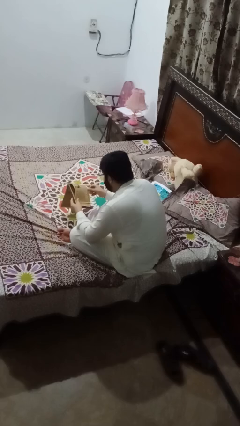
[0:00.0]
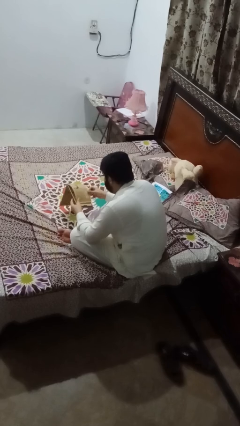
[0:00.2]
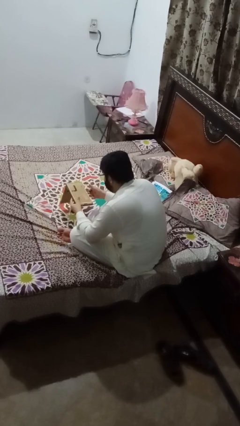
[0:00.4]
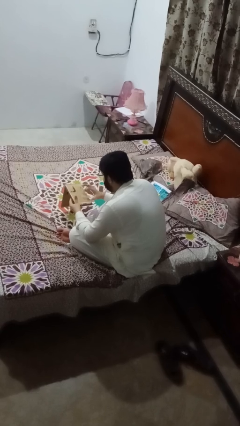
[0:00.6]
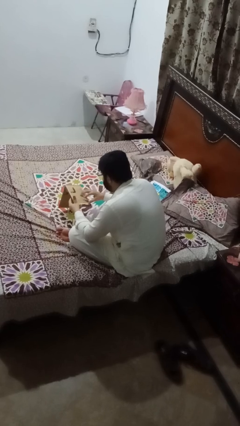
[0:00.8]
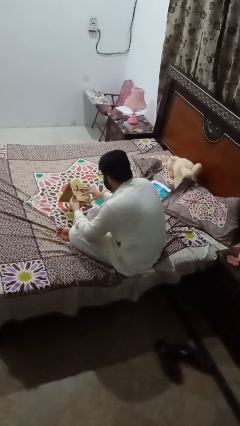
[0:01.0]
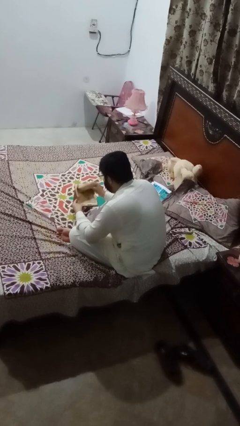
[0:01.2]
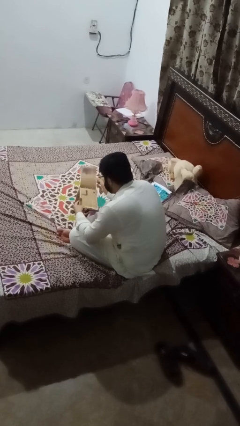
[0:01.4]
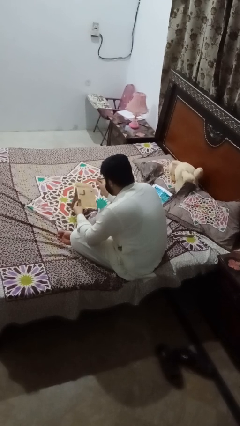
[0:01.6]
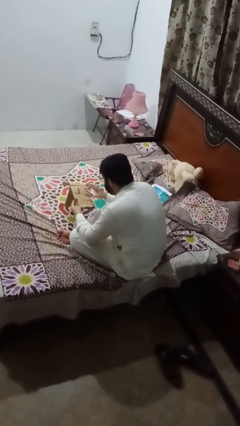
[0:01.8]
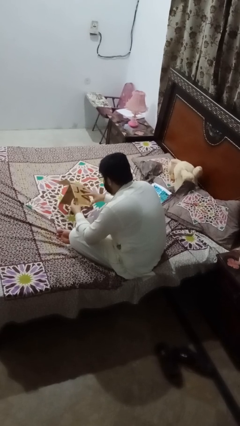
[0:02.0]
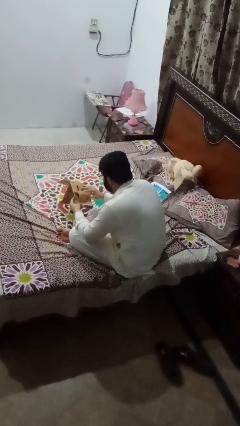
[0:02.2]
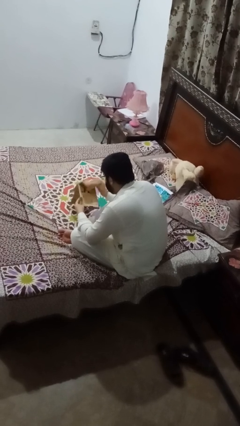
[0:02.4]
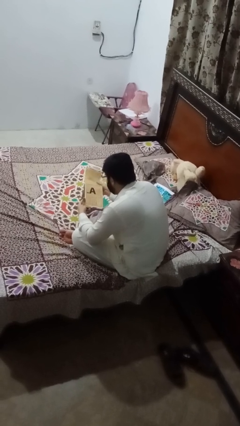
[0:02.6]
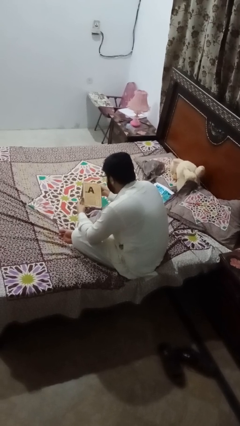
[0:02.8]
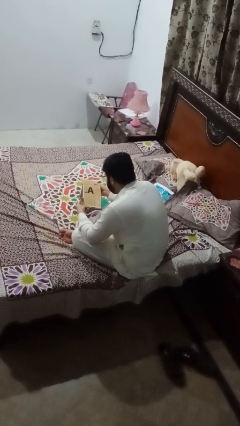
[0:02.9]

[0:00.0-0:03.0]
person reads magazine

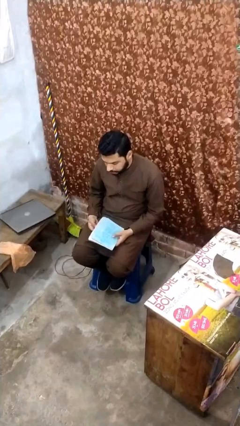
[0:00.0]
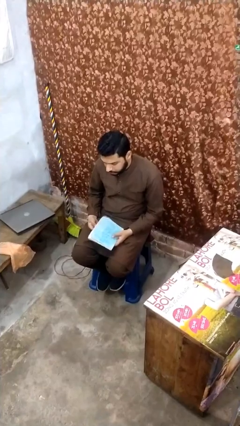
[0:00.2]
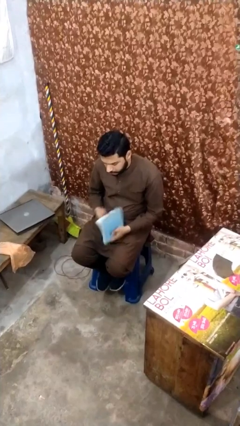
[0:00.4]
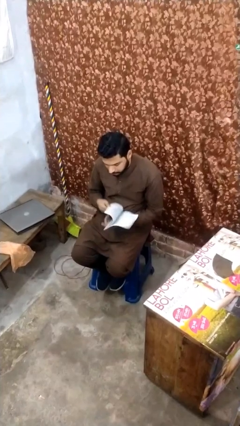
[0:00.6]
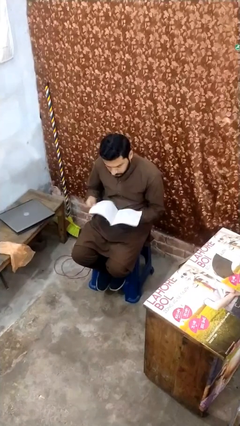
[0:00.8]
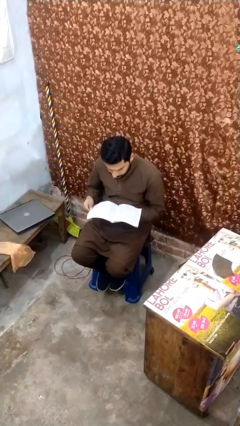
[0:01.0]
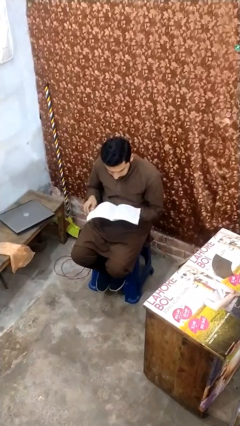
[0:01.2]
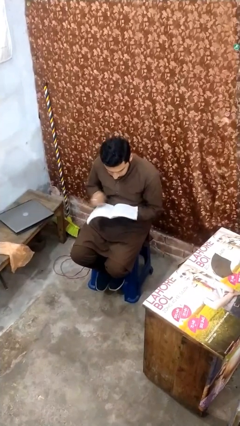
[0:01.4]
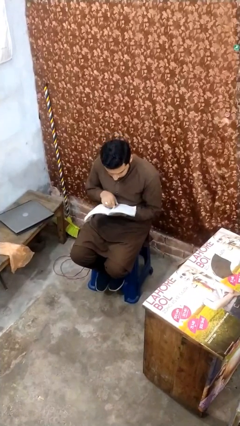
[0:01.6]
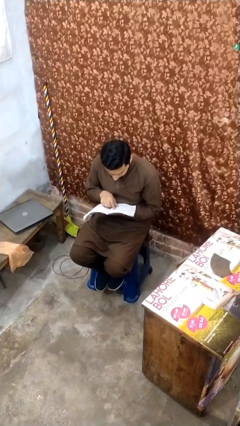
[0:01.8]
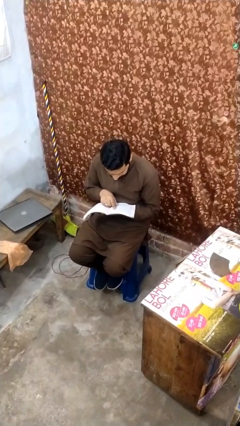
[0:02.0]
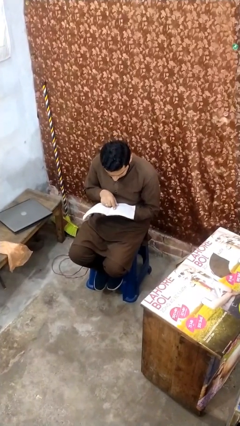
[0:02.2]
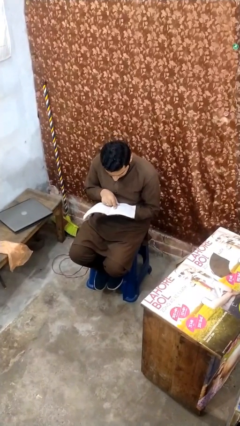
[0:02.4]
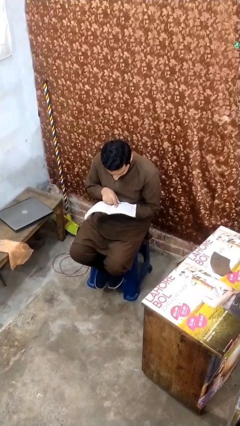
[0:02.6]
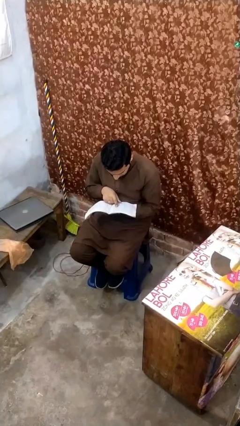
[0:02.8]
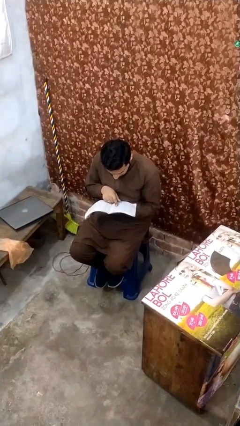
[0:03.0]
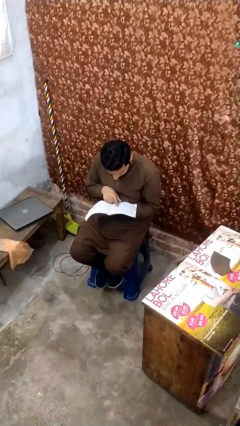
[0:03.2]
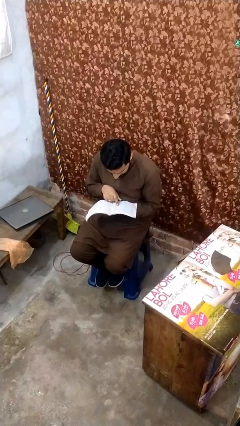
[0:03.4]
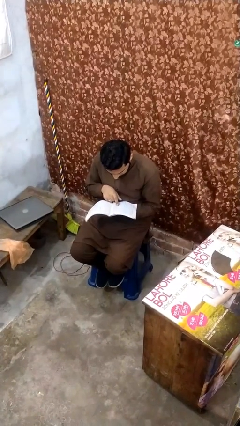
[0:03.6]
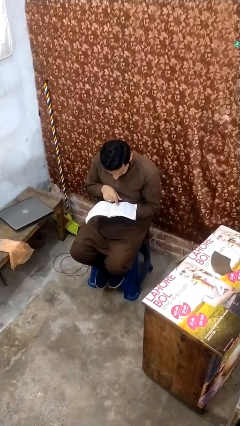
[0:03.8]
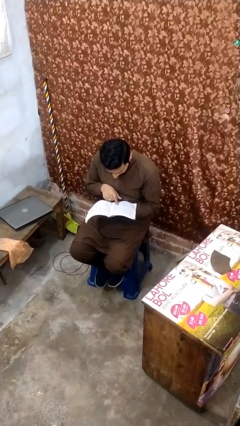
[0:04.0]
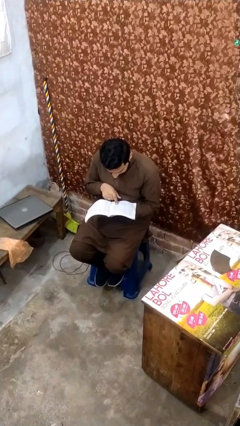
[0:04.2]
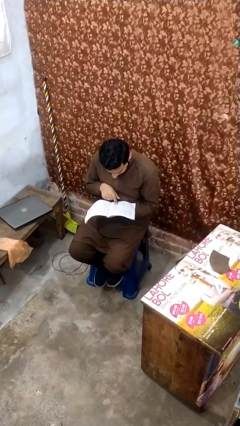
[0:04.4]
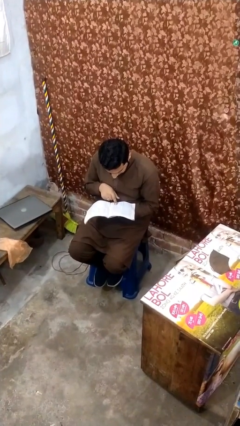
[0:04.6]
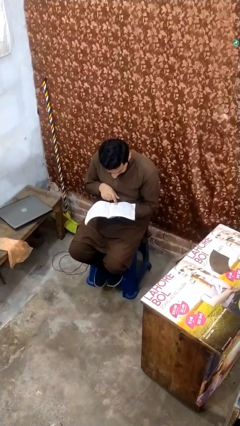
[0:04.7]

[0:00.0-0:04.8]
person reads document

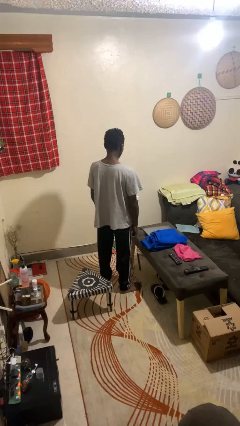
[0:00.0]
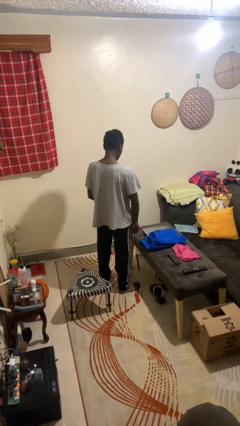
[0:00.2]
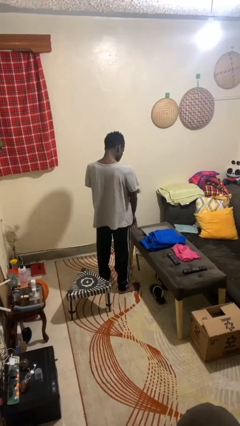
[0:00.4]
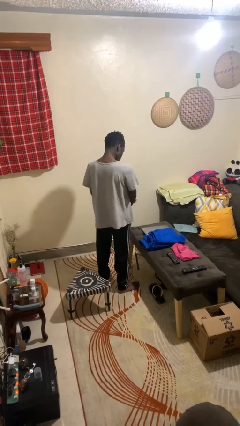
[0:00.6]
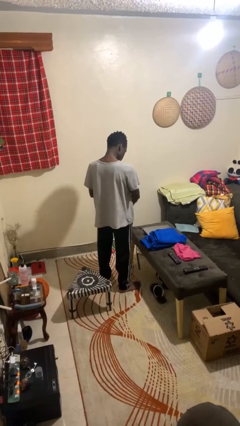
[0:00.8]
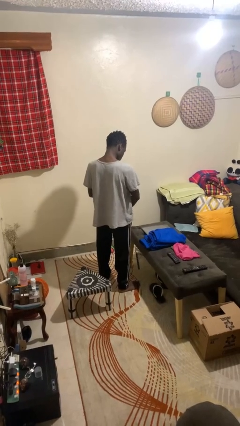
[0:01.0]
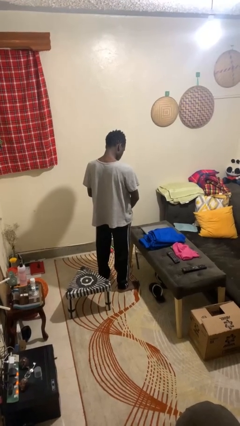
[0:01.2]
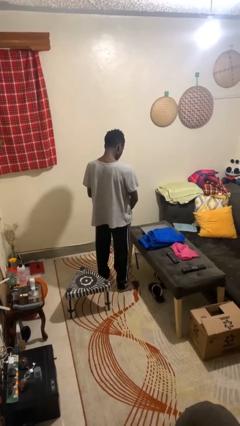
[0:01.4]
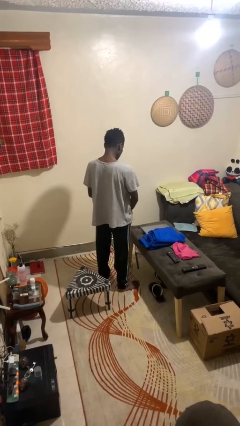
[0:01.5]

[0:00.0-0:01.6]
person swats bug

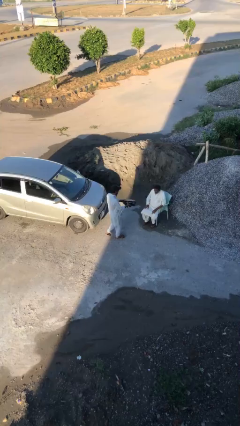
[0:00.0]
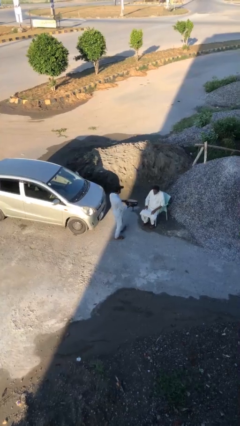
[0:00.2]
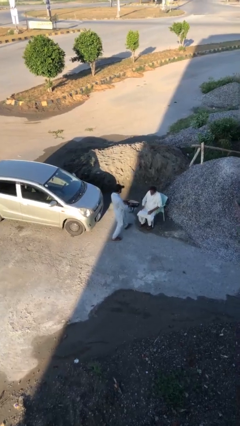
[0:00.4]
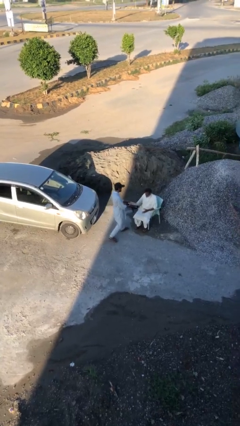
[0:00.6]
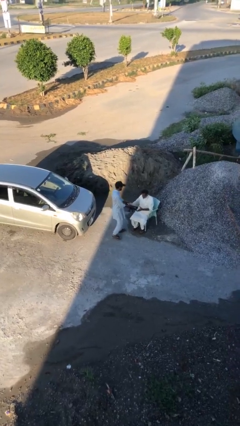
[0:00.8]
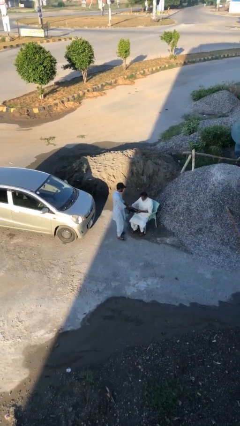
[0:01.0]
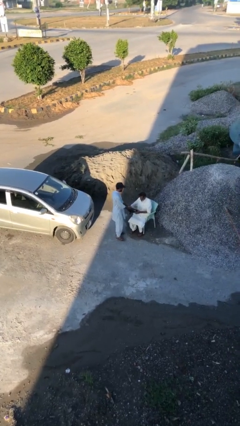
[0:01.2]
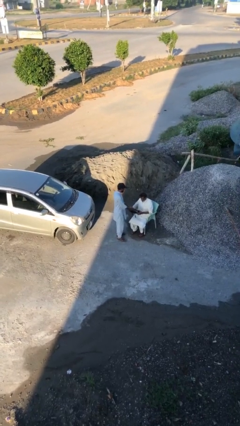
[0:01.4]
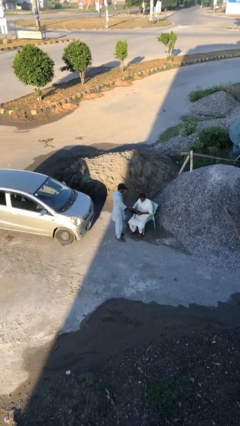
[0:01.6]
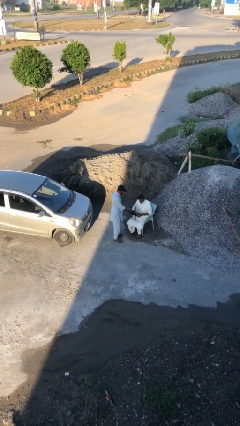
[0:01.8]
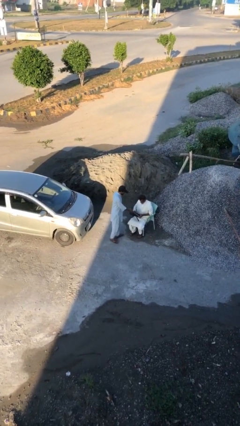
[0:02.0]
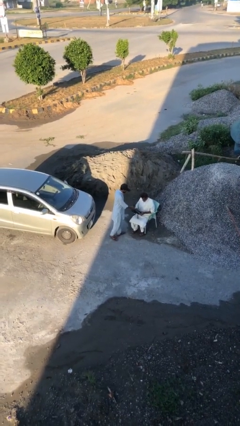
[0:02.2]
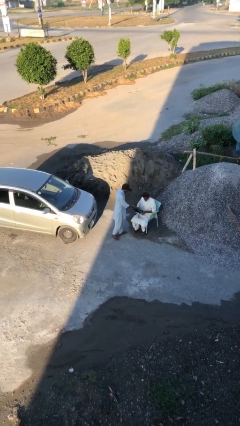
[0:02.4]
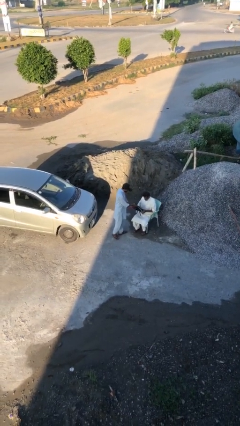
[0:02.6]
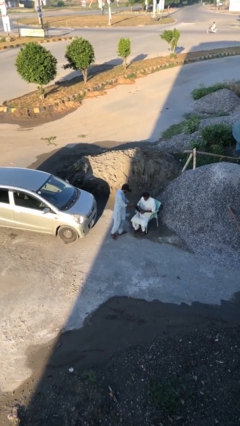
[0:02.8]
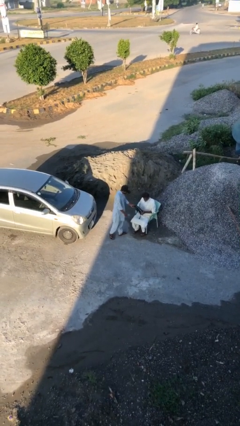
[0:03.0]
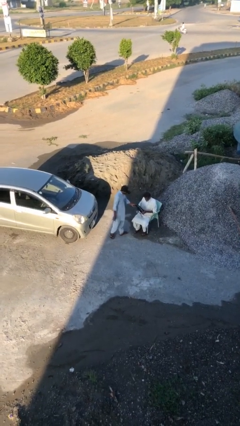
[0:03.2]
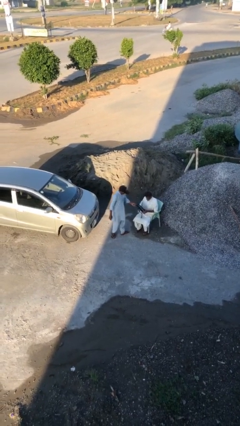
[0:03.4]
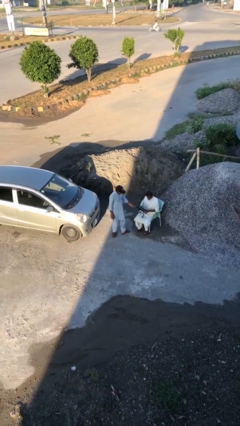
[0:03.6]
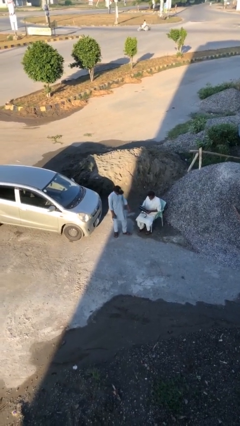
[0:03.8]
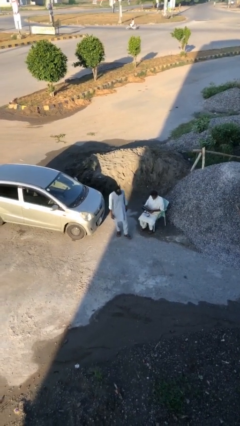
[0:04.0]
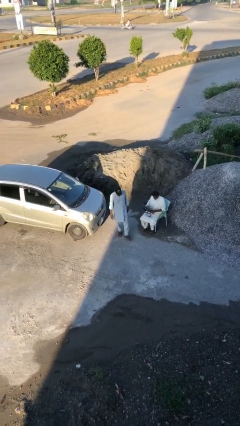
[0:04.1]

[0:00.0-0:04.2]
person transfers object to person

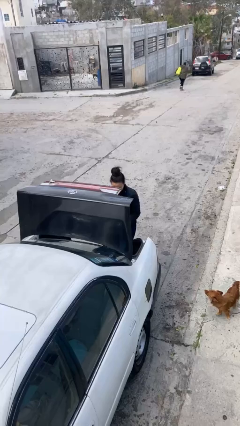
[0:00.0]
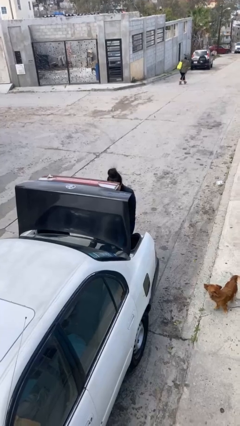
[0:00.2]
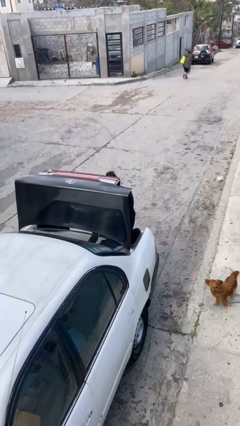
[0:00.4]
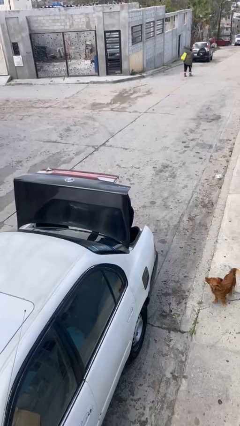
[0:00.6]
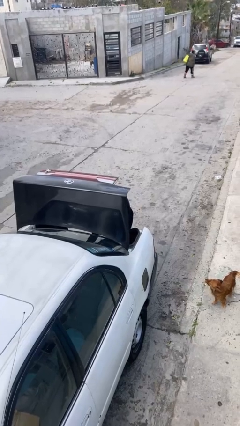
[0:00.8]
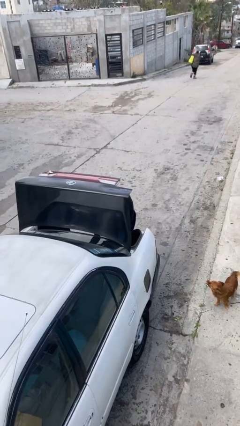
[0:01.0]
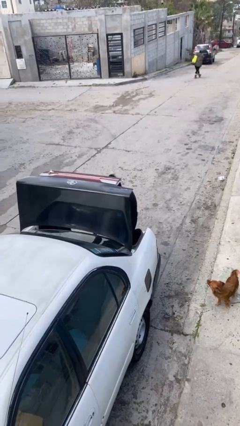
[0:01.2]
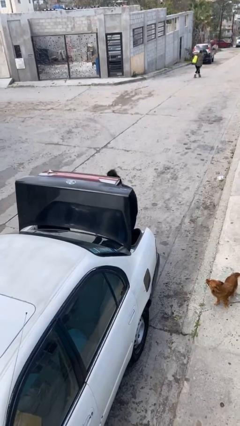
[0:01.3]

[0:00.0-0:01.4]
person loads car

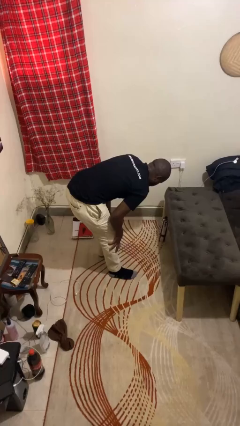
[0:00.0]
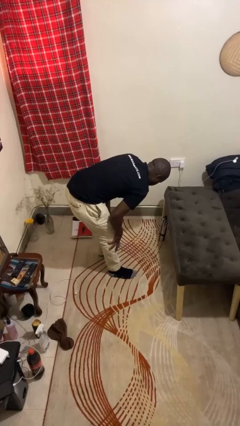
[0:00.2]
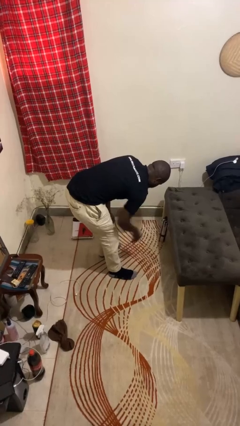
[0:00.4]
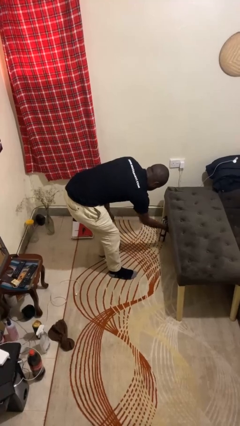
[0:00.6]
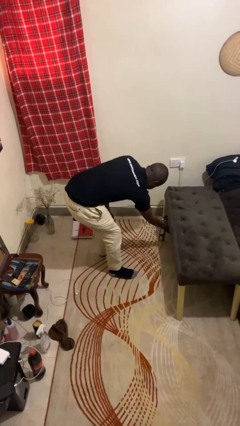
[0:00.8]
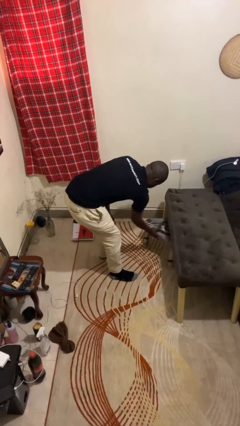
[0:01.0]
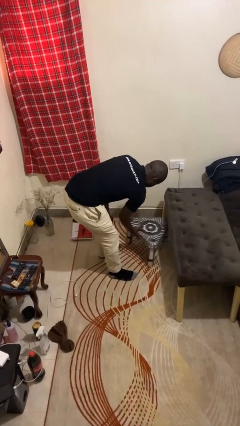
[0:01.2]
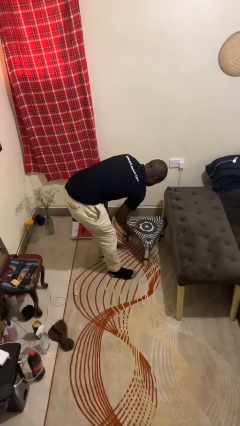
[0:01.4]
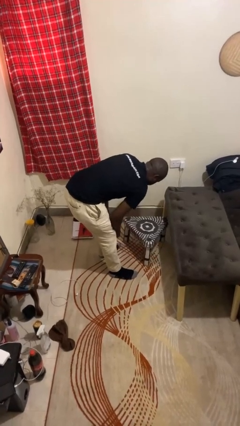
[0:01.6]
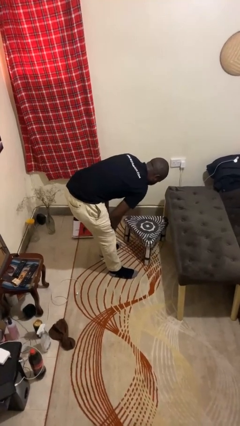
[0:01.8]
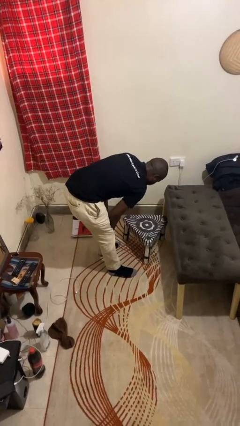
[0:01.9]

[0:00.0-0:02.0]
person pulls out chair

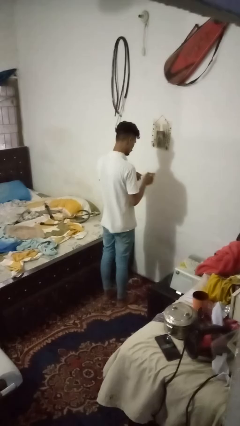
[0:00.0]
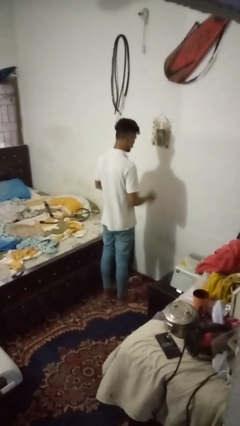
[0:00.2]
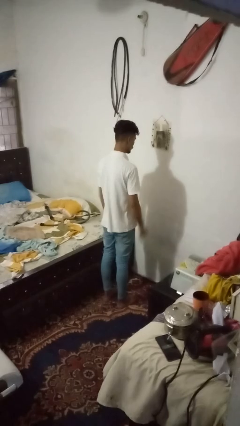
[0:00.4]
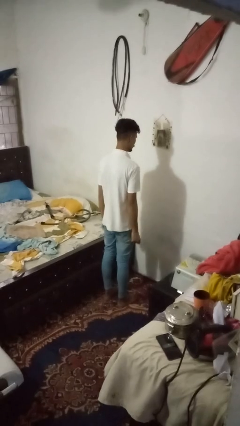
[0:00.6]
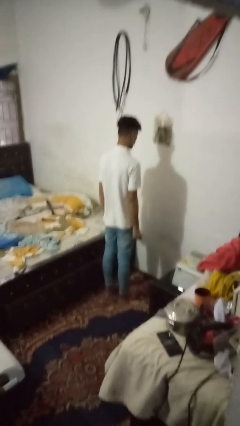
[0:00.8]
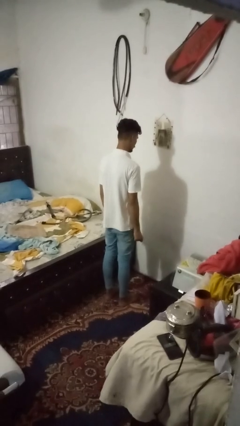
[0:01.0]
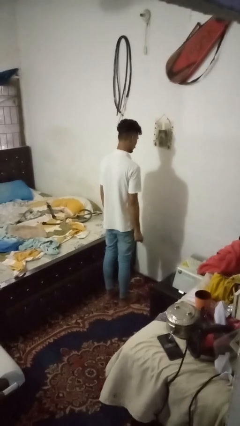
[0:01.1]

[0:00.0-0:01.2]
person paints fingernails
